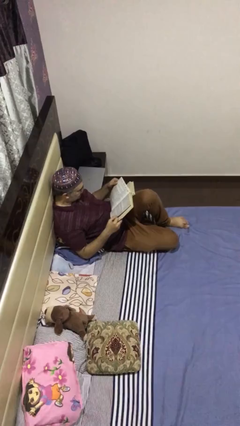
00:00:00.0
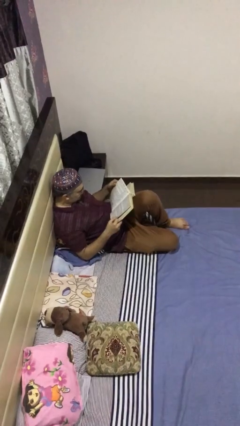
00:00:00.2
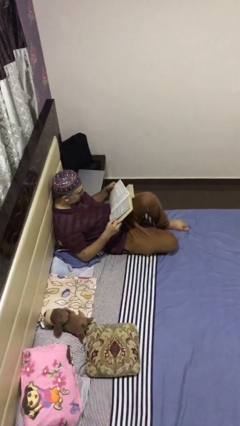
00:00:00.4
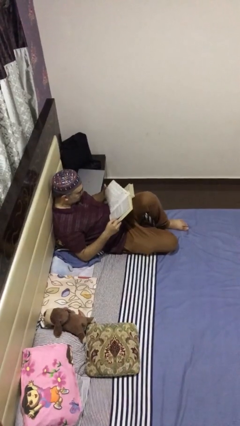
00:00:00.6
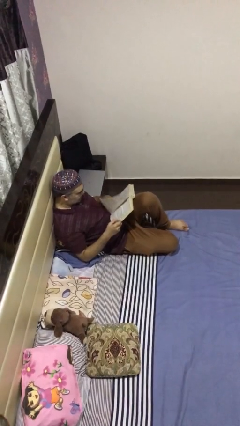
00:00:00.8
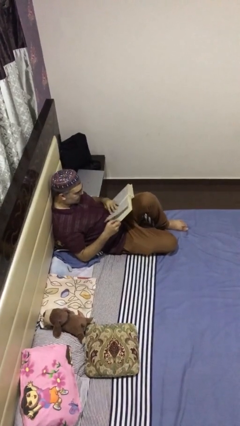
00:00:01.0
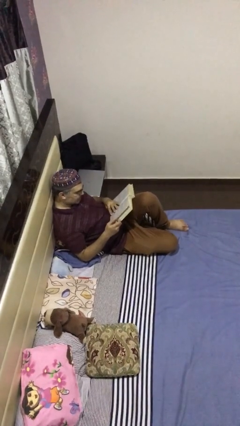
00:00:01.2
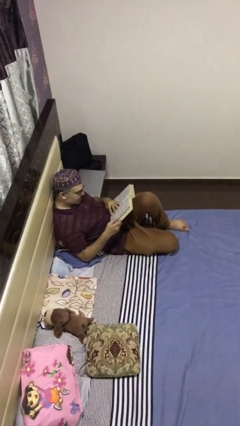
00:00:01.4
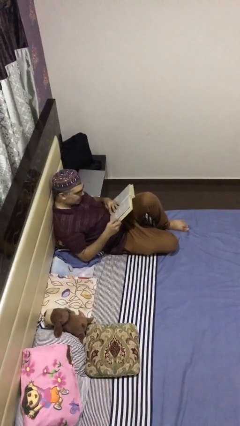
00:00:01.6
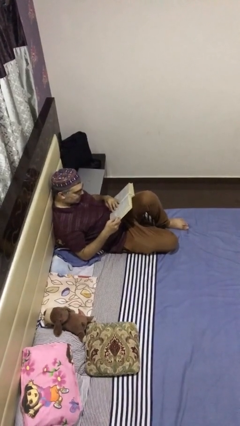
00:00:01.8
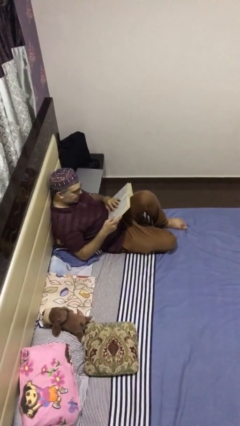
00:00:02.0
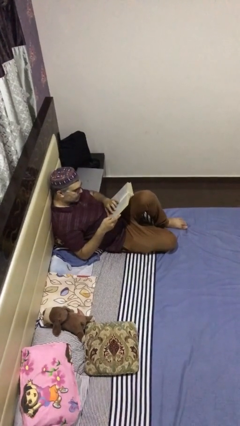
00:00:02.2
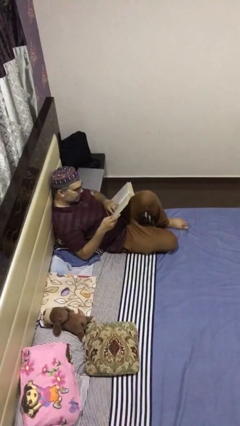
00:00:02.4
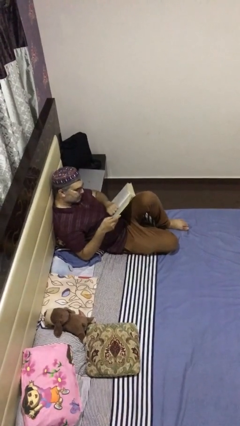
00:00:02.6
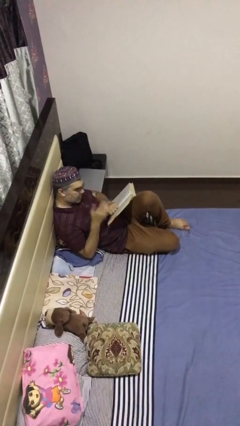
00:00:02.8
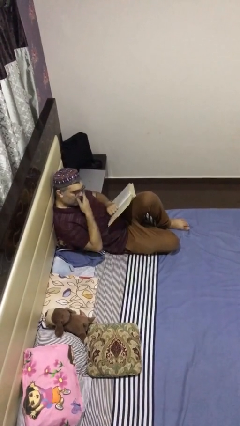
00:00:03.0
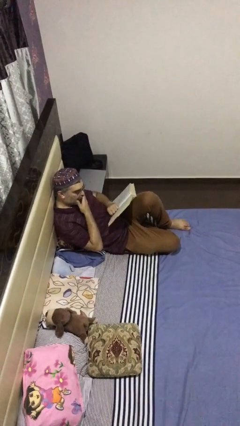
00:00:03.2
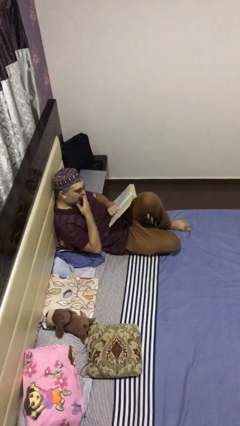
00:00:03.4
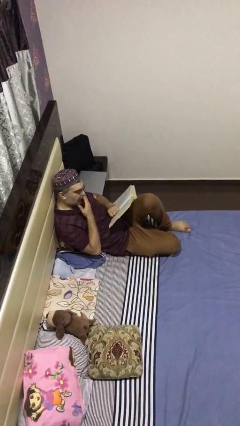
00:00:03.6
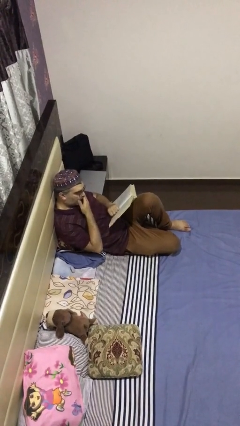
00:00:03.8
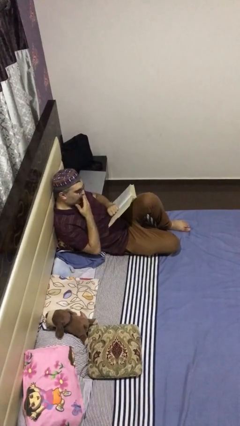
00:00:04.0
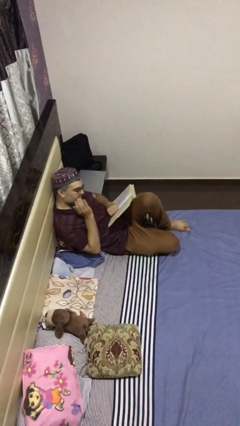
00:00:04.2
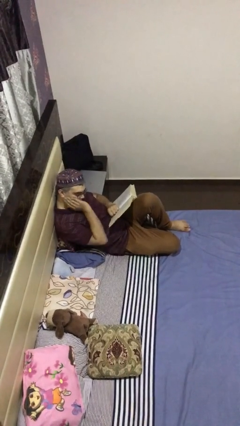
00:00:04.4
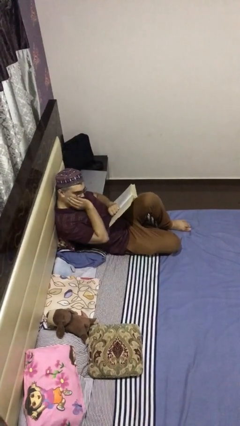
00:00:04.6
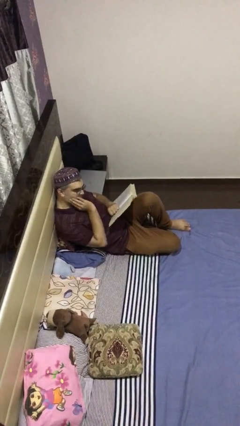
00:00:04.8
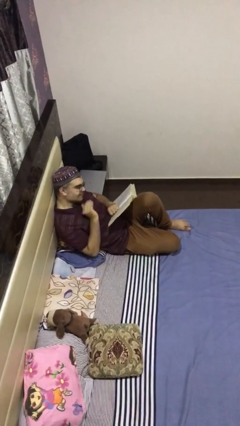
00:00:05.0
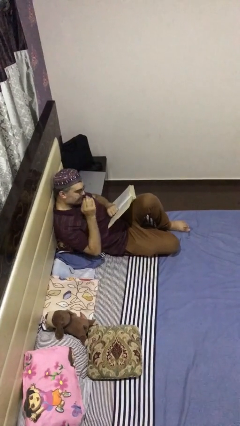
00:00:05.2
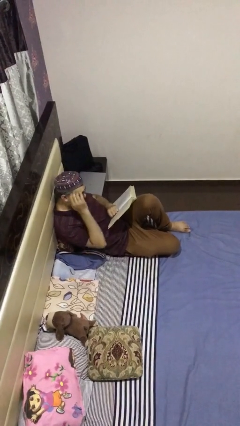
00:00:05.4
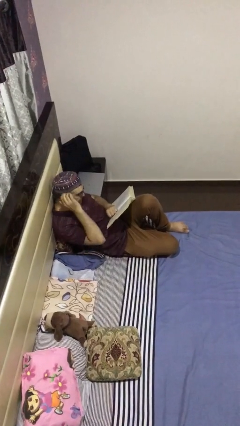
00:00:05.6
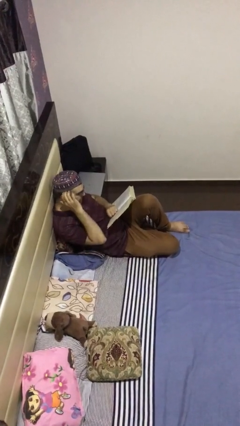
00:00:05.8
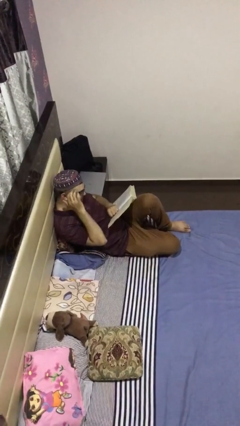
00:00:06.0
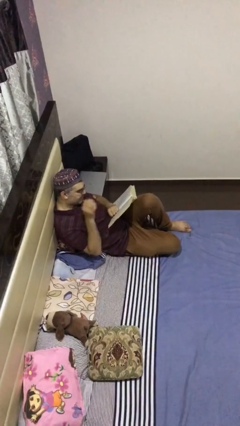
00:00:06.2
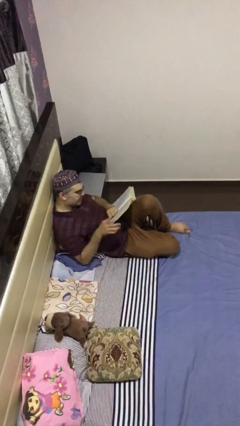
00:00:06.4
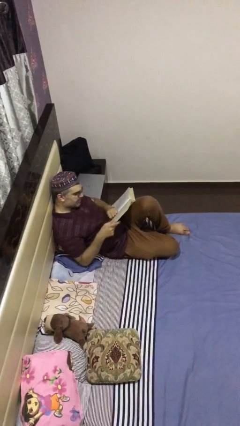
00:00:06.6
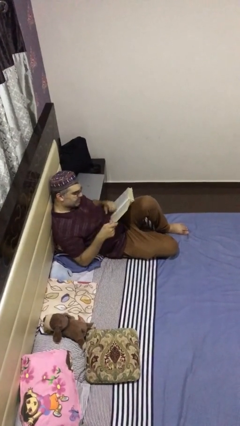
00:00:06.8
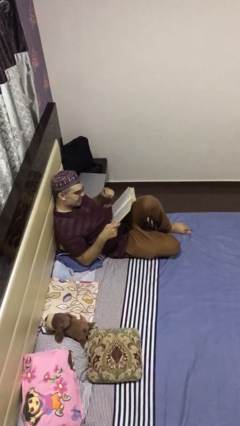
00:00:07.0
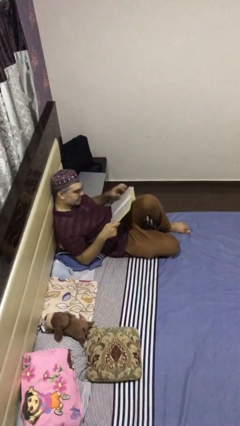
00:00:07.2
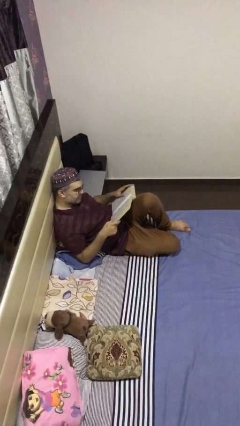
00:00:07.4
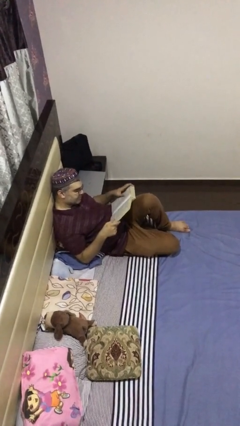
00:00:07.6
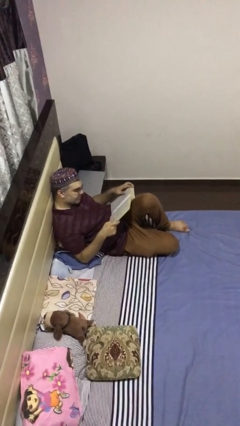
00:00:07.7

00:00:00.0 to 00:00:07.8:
person reads document

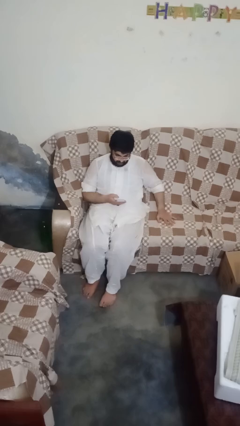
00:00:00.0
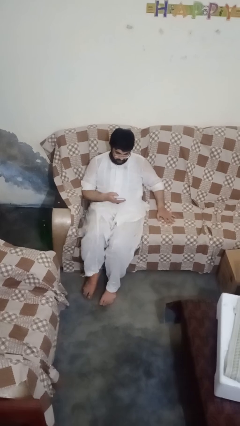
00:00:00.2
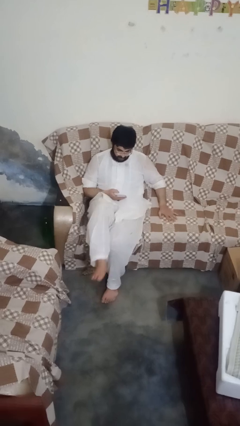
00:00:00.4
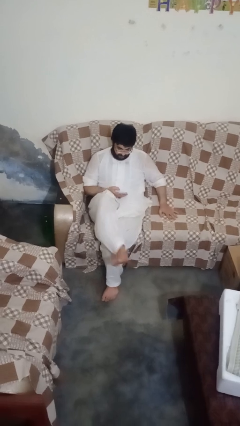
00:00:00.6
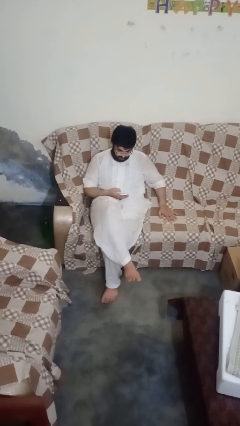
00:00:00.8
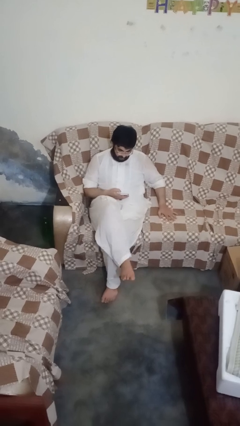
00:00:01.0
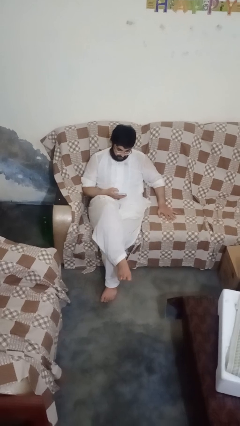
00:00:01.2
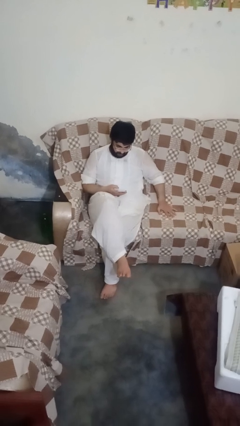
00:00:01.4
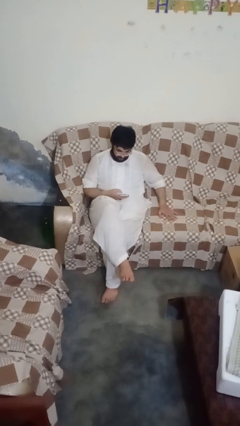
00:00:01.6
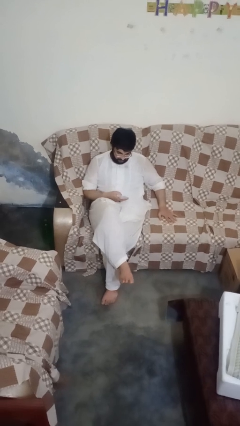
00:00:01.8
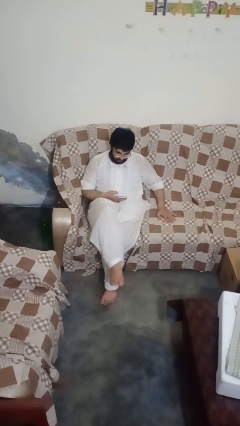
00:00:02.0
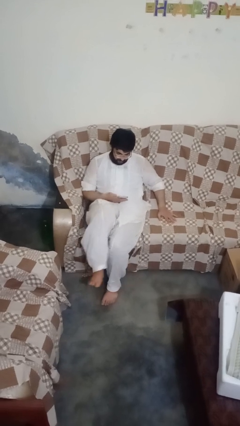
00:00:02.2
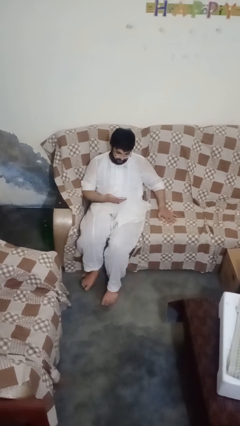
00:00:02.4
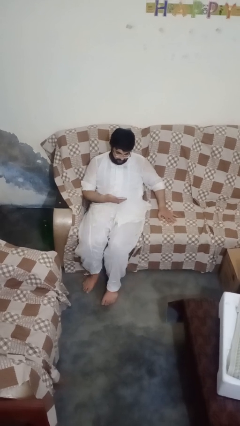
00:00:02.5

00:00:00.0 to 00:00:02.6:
person crosses legs

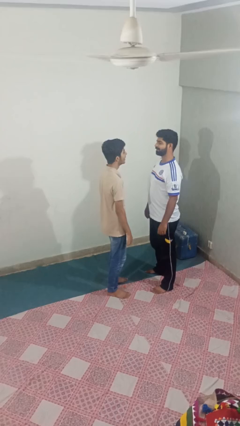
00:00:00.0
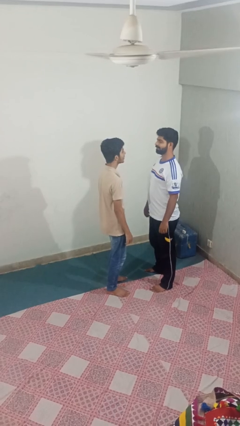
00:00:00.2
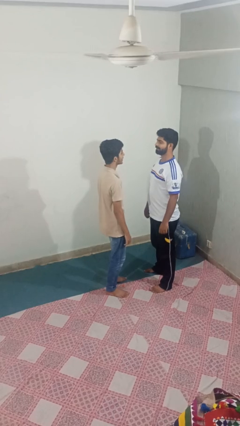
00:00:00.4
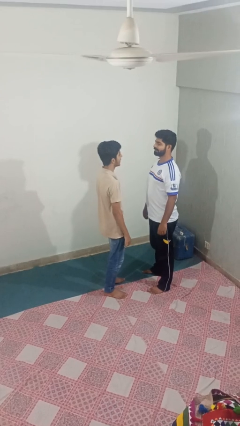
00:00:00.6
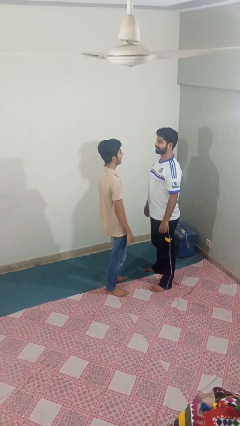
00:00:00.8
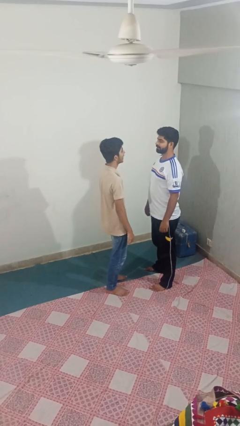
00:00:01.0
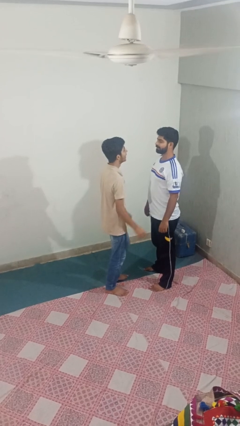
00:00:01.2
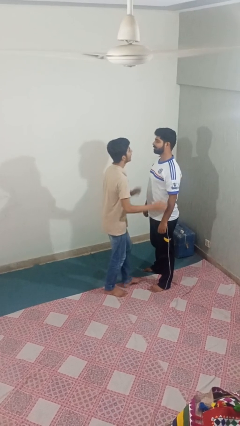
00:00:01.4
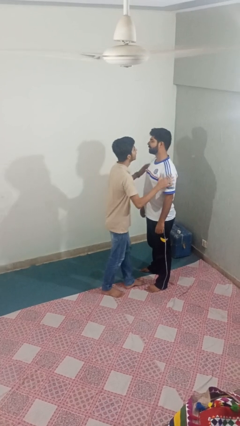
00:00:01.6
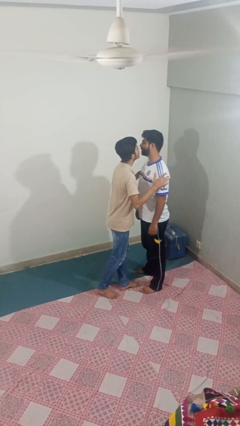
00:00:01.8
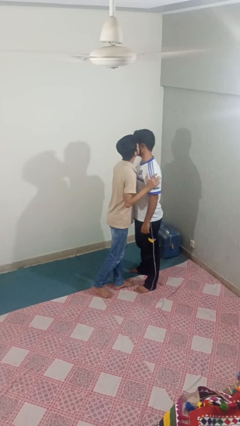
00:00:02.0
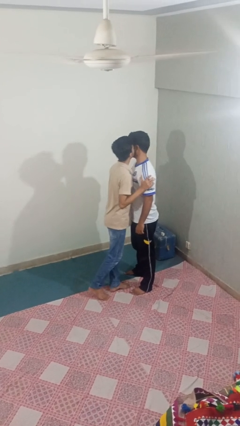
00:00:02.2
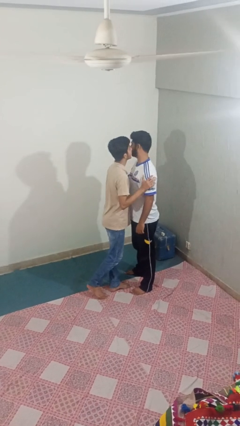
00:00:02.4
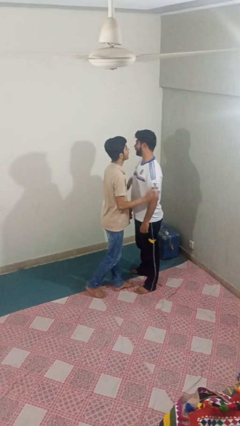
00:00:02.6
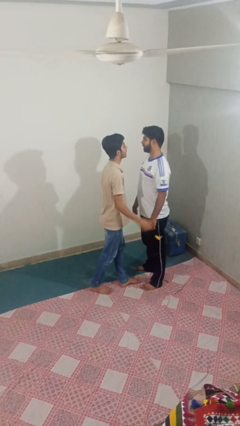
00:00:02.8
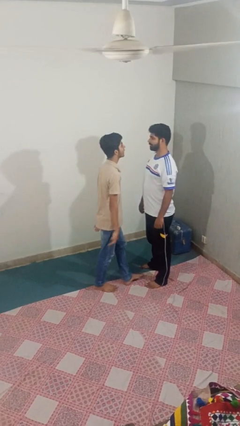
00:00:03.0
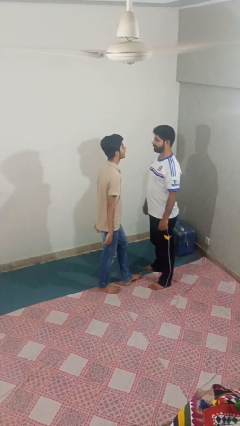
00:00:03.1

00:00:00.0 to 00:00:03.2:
person kisses cheek of person

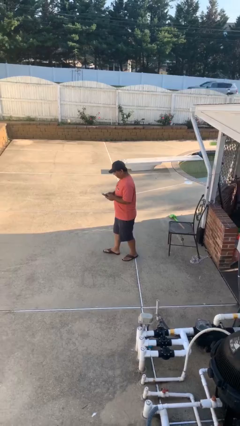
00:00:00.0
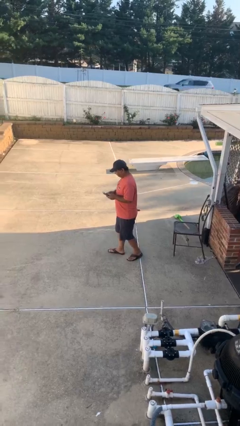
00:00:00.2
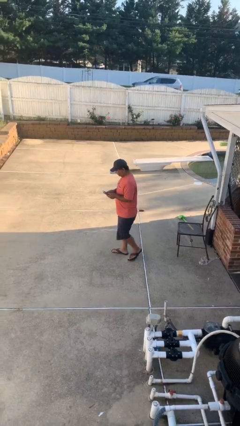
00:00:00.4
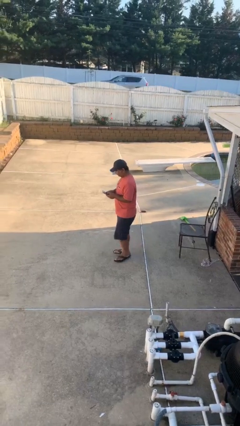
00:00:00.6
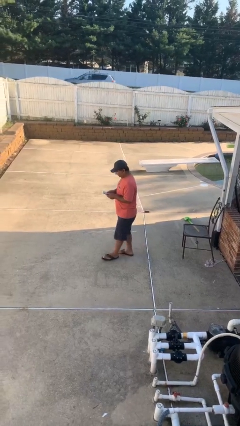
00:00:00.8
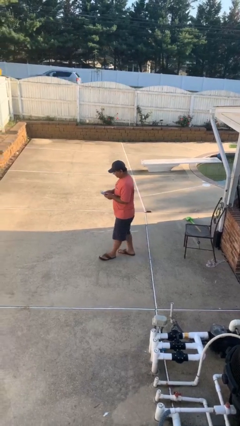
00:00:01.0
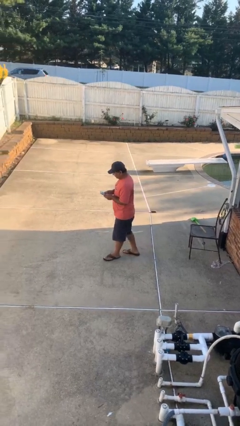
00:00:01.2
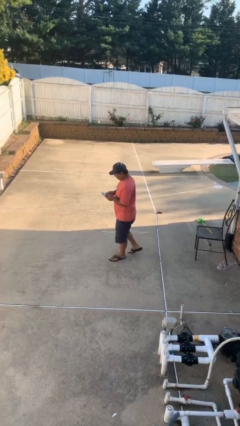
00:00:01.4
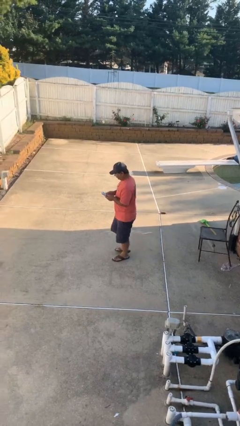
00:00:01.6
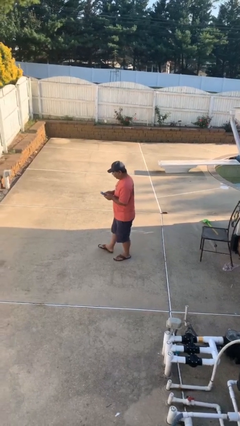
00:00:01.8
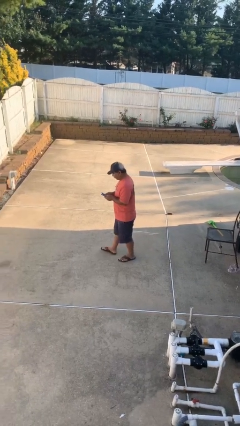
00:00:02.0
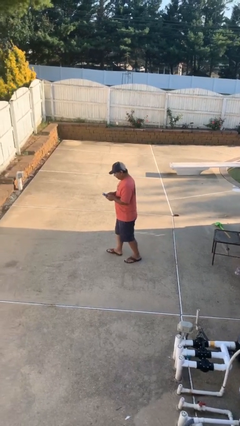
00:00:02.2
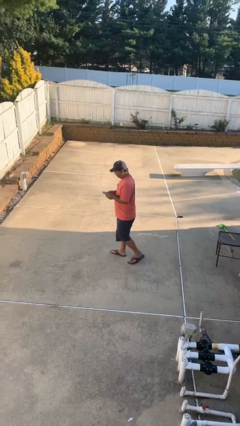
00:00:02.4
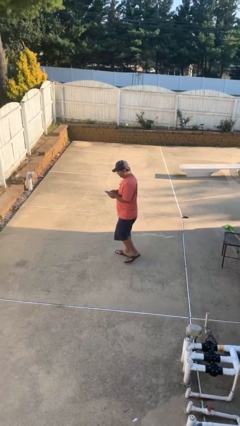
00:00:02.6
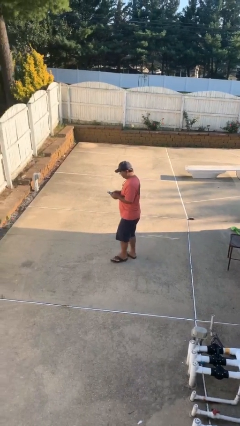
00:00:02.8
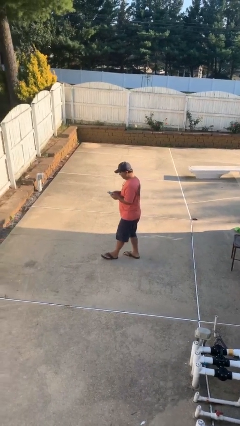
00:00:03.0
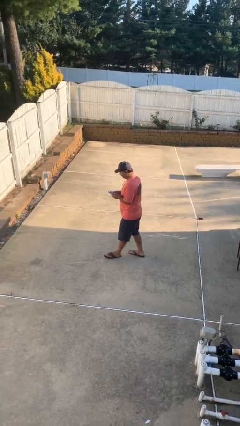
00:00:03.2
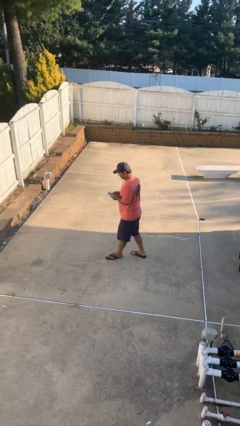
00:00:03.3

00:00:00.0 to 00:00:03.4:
person texts on phone

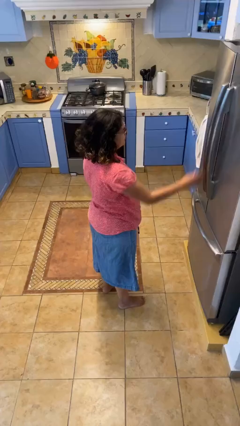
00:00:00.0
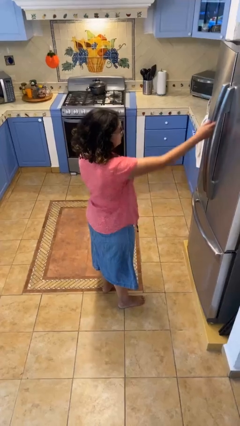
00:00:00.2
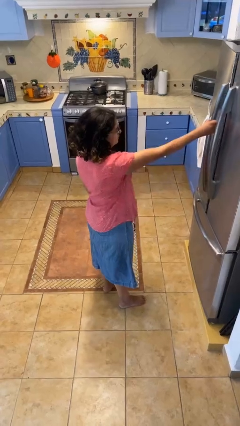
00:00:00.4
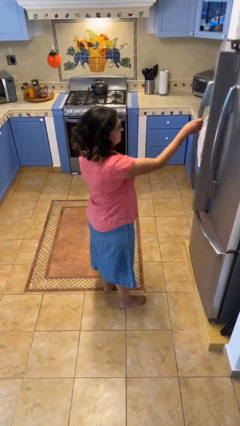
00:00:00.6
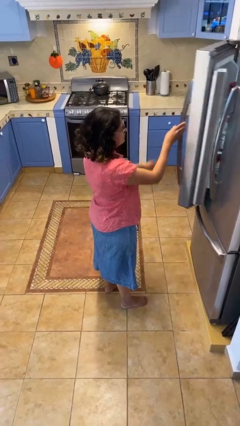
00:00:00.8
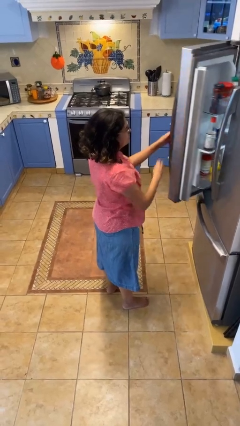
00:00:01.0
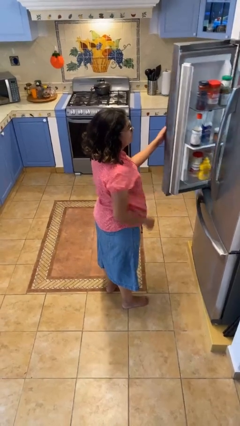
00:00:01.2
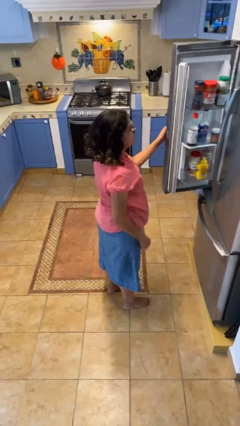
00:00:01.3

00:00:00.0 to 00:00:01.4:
person opens refrigerator
